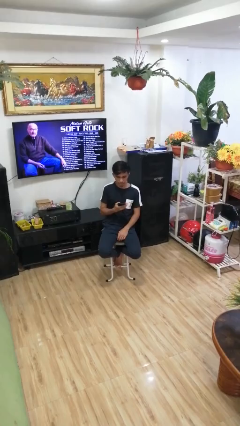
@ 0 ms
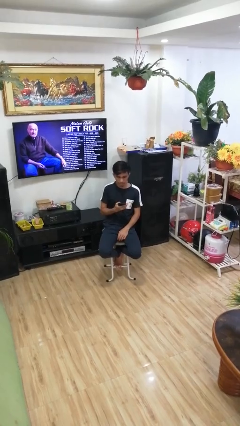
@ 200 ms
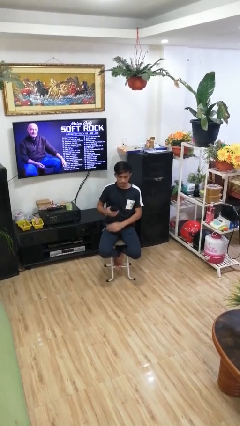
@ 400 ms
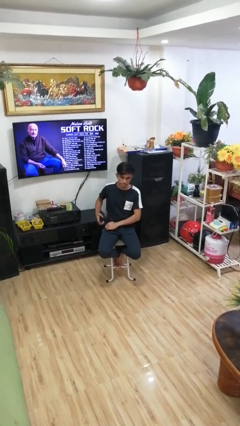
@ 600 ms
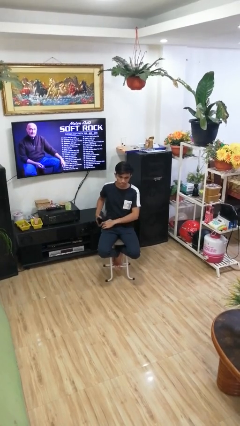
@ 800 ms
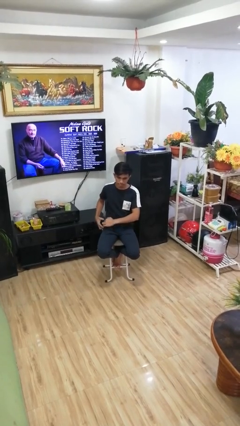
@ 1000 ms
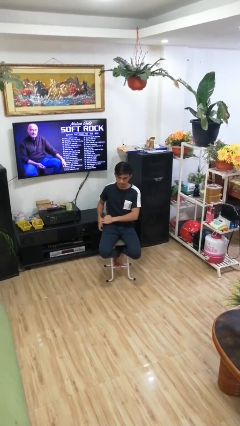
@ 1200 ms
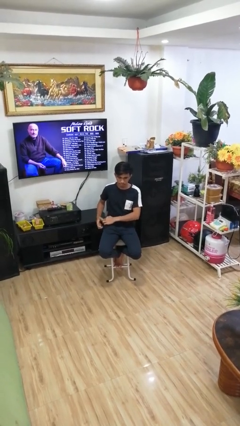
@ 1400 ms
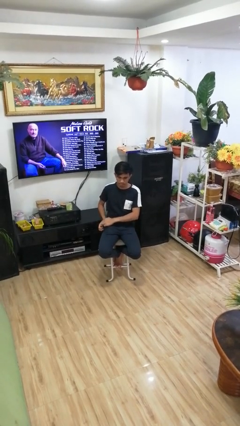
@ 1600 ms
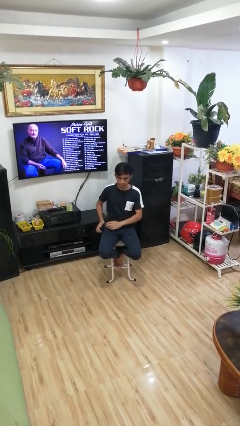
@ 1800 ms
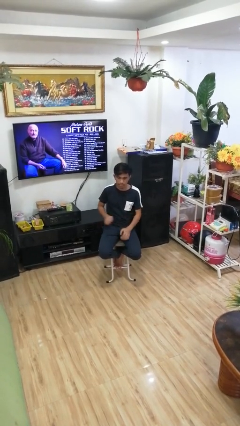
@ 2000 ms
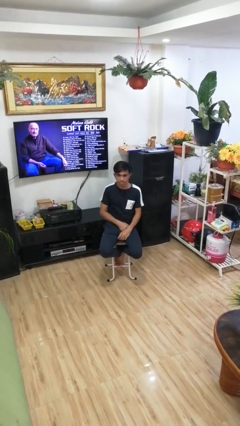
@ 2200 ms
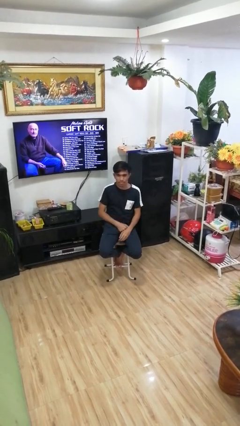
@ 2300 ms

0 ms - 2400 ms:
person puts phone into pocket

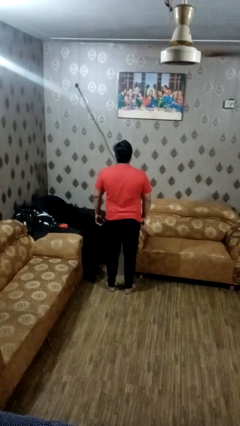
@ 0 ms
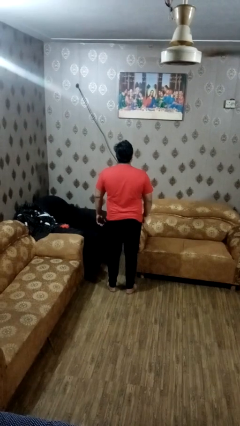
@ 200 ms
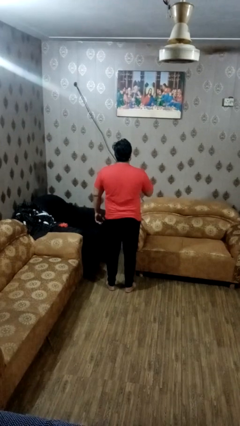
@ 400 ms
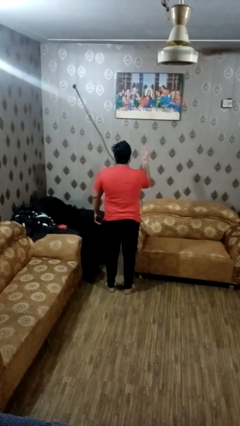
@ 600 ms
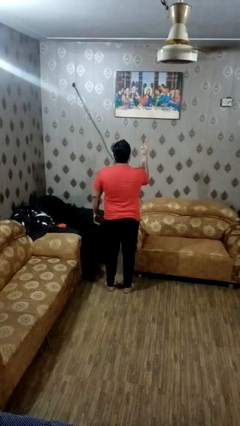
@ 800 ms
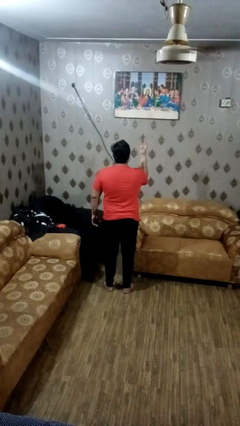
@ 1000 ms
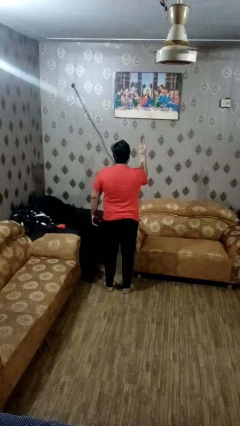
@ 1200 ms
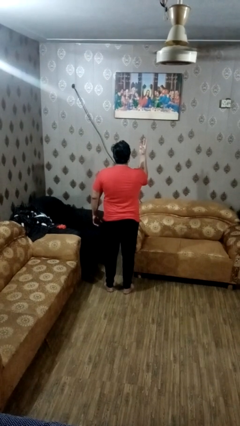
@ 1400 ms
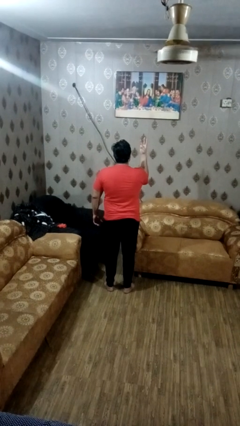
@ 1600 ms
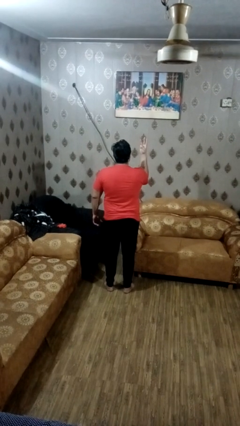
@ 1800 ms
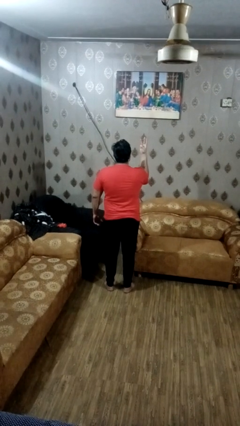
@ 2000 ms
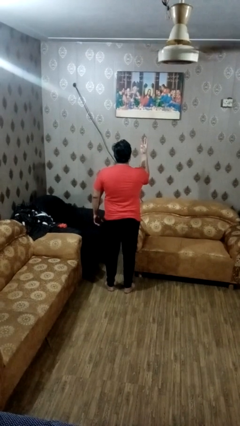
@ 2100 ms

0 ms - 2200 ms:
person gestures number three

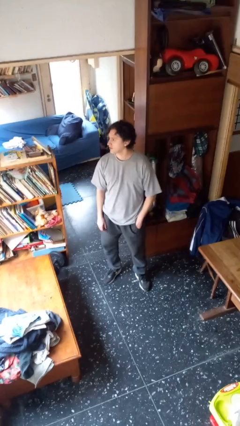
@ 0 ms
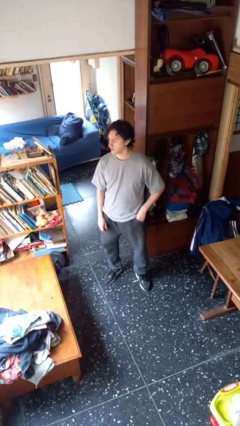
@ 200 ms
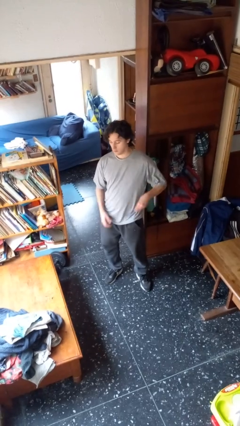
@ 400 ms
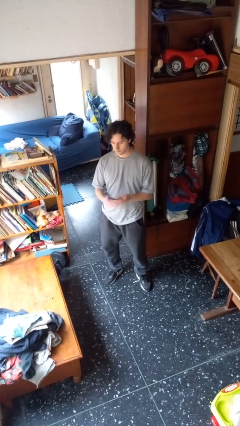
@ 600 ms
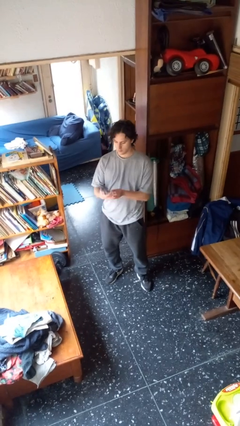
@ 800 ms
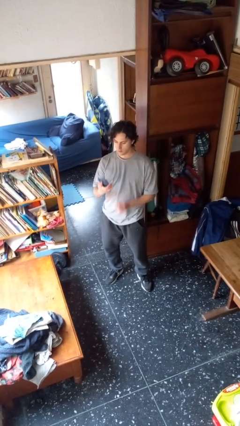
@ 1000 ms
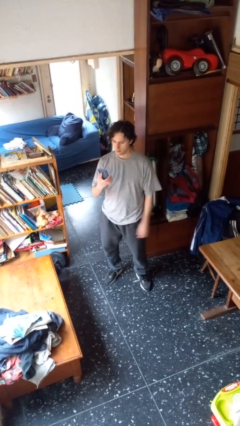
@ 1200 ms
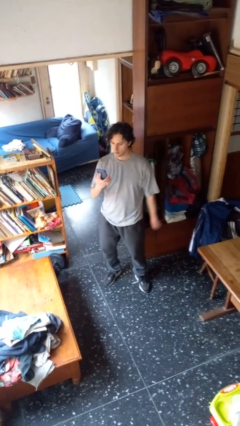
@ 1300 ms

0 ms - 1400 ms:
person takes phone from pocket

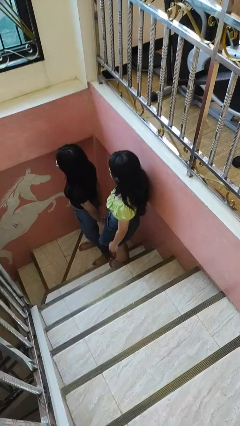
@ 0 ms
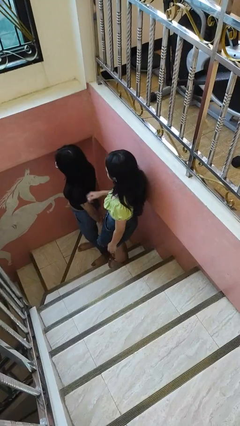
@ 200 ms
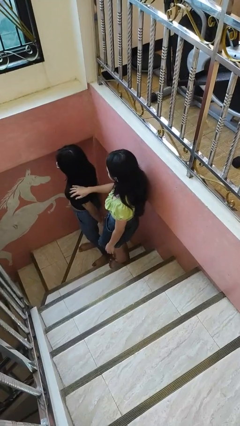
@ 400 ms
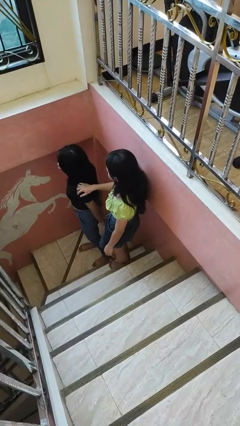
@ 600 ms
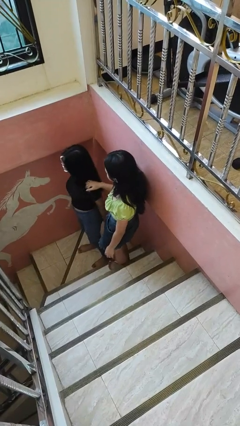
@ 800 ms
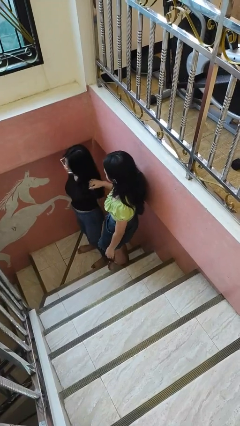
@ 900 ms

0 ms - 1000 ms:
person grabs person by shoulder

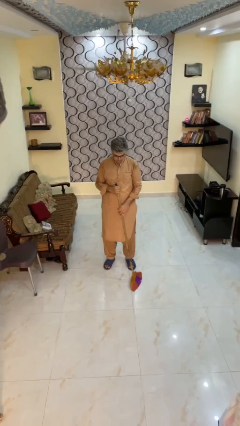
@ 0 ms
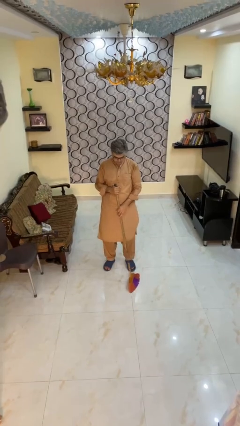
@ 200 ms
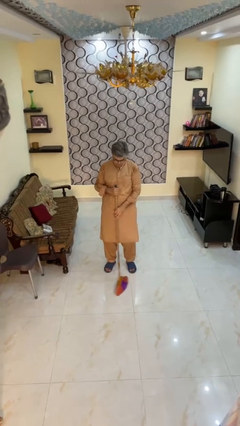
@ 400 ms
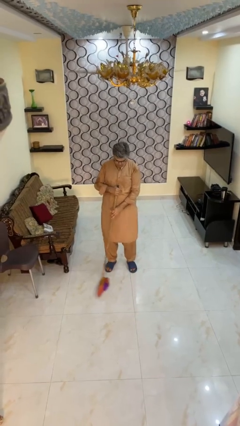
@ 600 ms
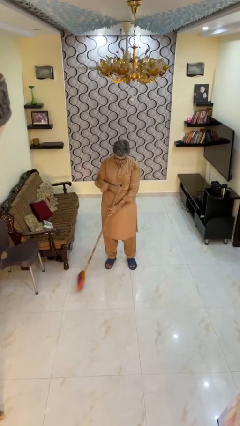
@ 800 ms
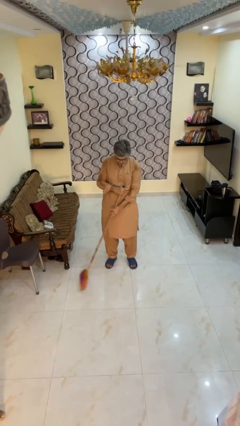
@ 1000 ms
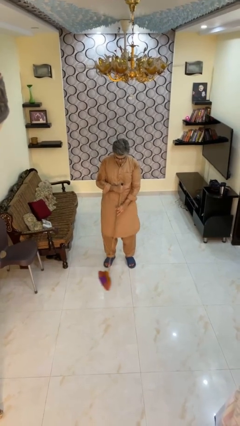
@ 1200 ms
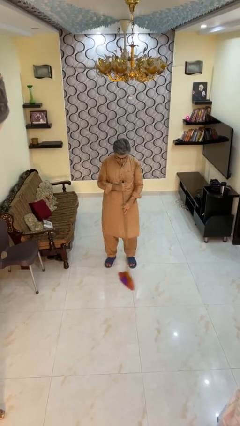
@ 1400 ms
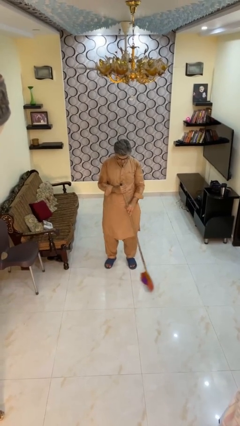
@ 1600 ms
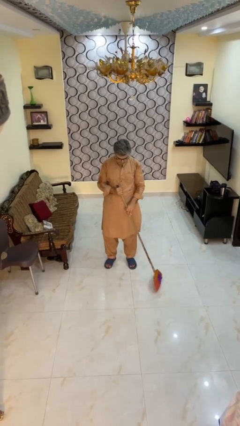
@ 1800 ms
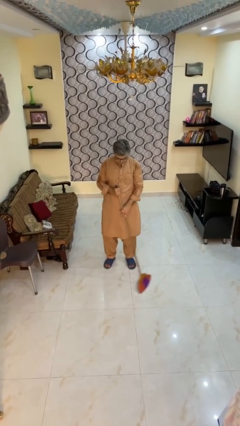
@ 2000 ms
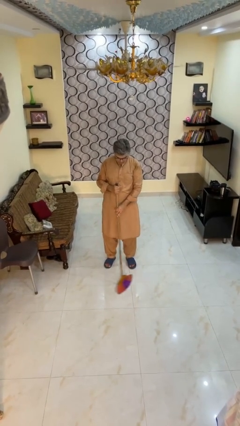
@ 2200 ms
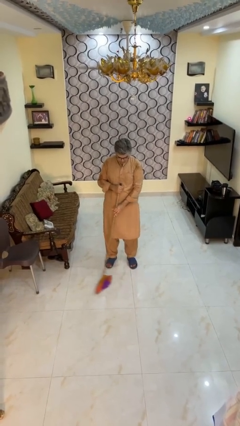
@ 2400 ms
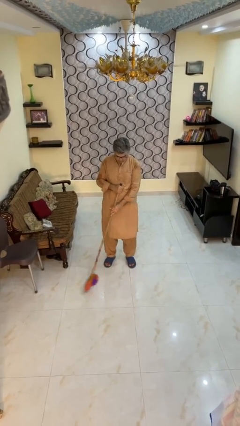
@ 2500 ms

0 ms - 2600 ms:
person mops

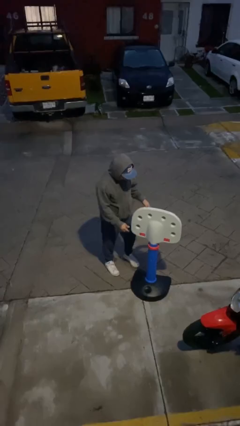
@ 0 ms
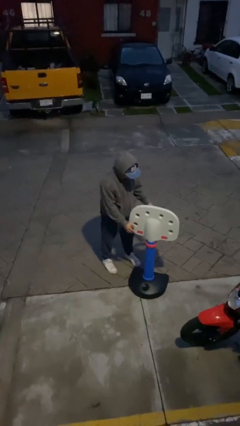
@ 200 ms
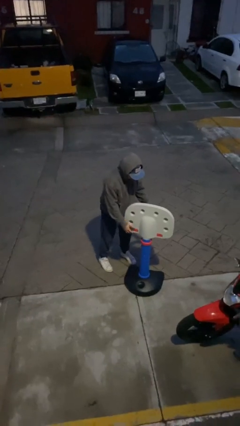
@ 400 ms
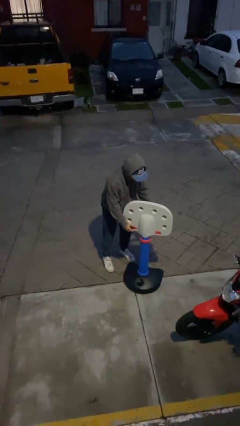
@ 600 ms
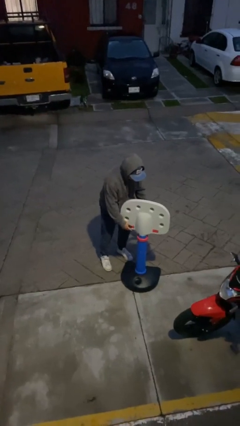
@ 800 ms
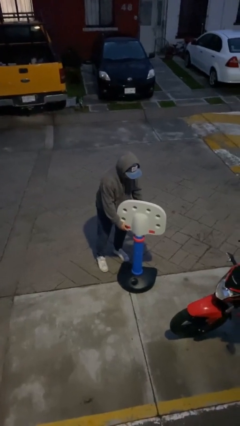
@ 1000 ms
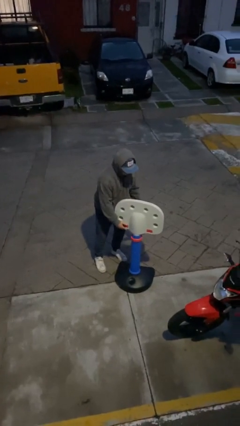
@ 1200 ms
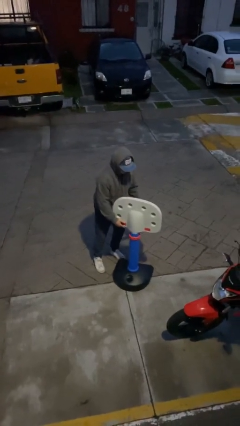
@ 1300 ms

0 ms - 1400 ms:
person picks up object from floor

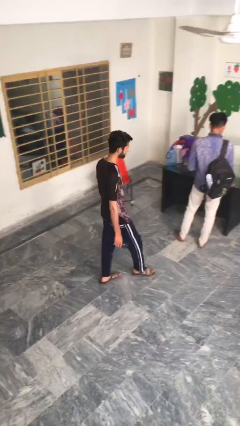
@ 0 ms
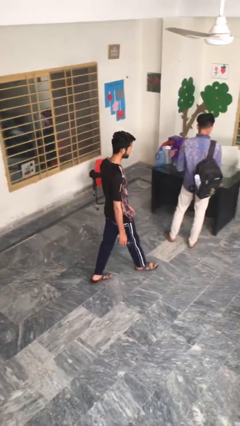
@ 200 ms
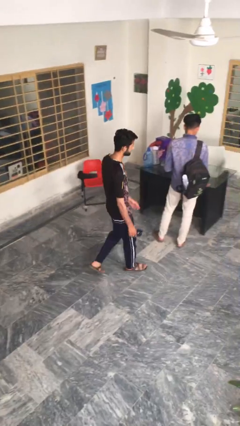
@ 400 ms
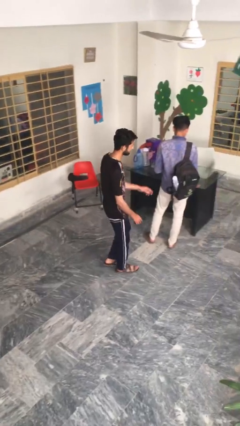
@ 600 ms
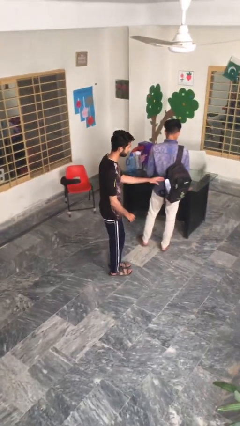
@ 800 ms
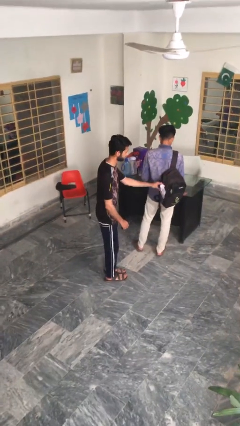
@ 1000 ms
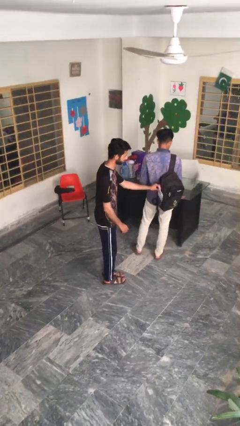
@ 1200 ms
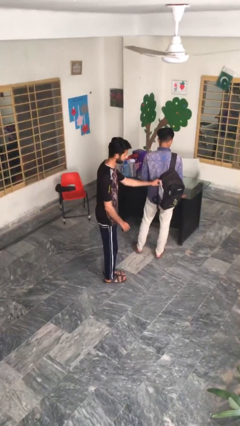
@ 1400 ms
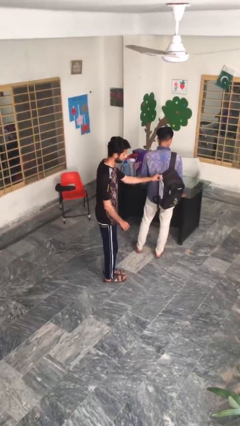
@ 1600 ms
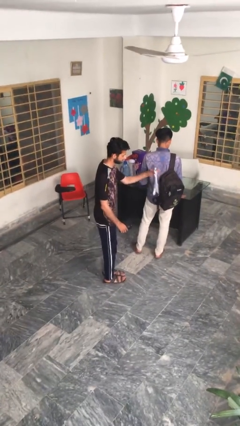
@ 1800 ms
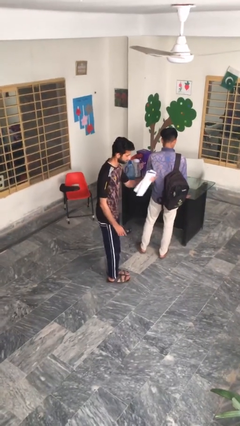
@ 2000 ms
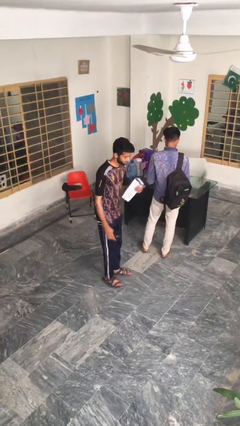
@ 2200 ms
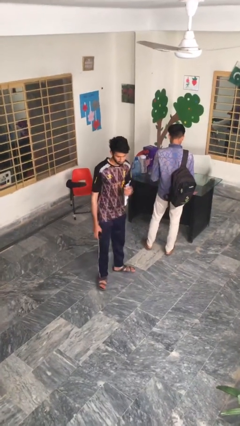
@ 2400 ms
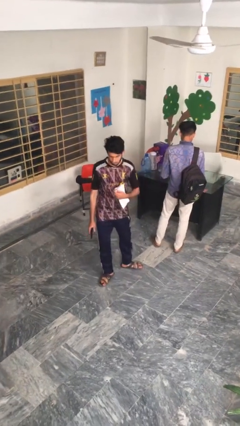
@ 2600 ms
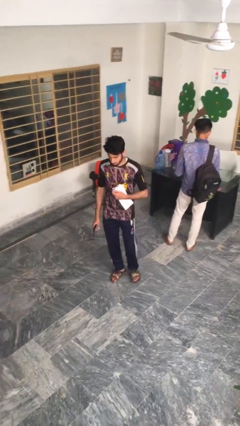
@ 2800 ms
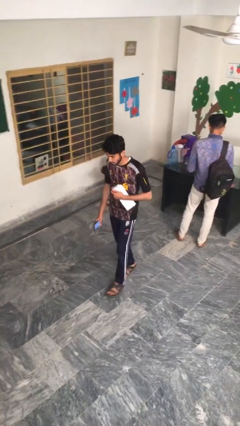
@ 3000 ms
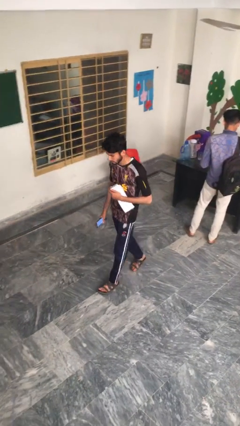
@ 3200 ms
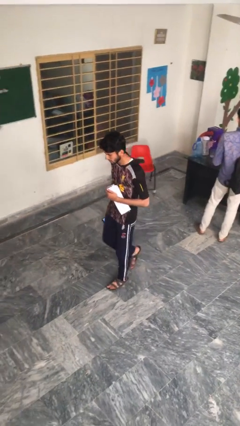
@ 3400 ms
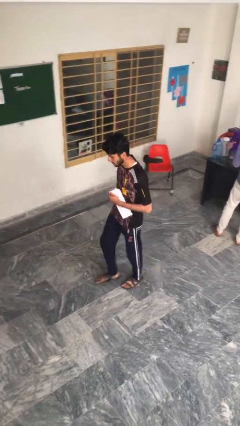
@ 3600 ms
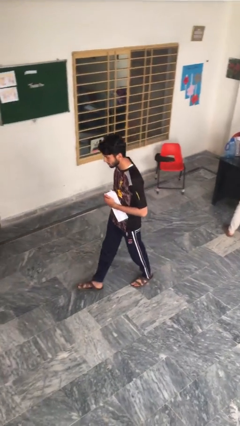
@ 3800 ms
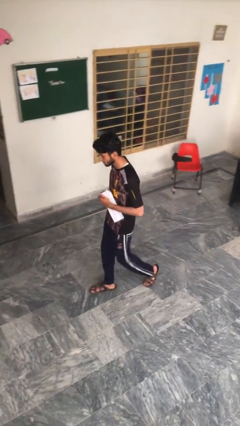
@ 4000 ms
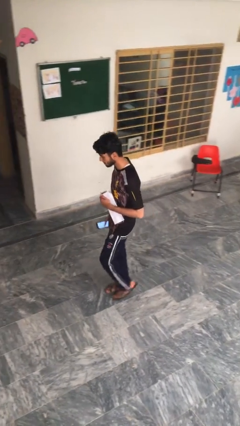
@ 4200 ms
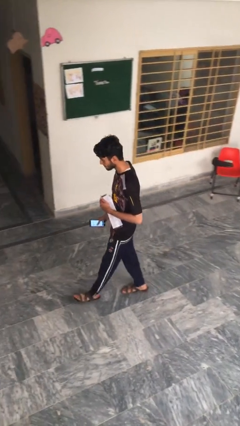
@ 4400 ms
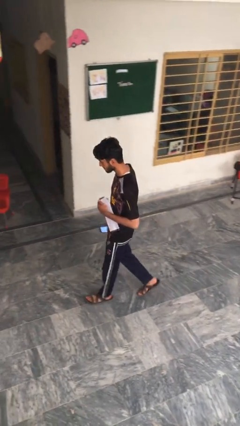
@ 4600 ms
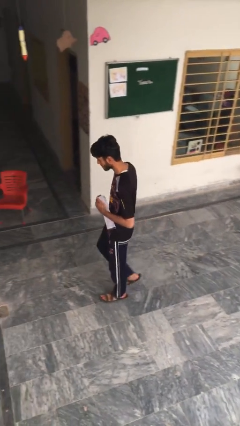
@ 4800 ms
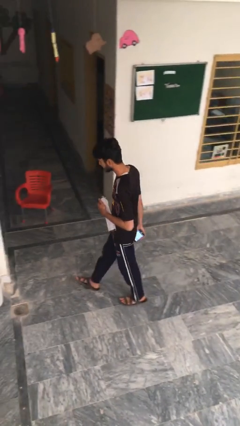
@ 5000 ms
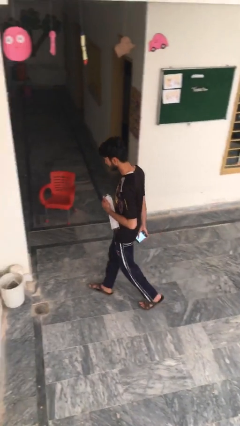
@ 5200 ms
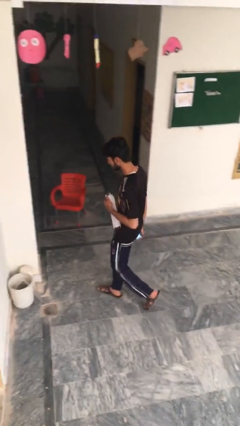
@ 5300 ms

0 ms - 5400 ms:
person steals object from person

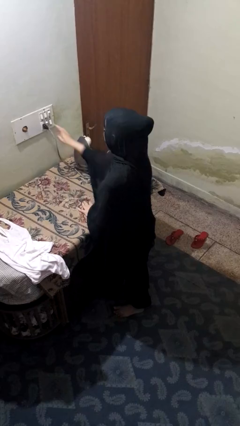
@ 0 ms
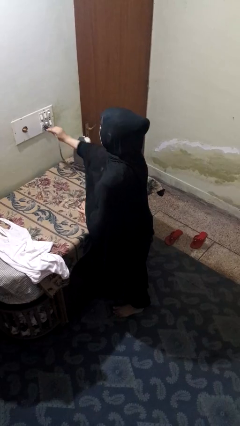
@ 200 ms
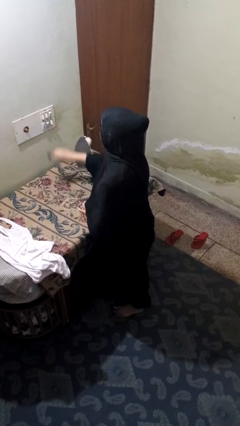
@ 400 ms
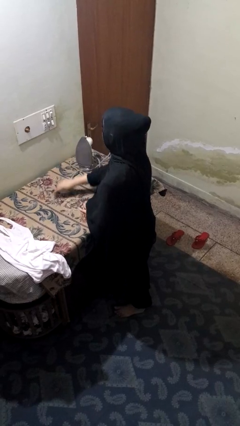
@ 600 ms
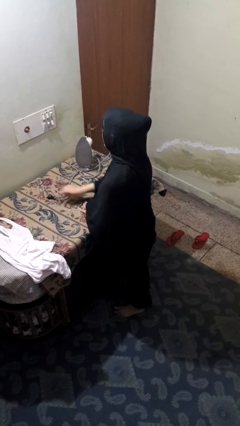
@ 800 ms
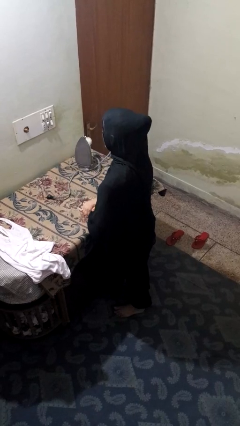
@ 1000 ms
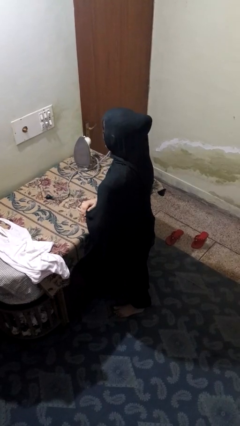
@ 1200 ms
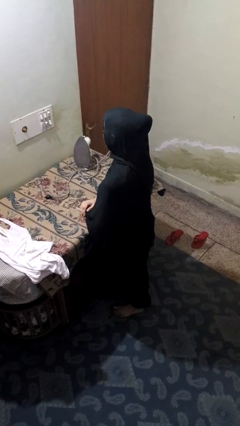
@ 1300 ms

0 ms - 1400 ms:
person unplugs from electrical socket
